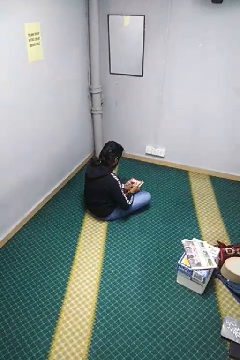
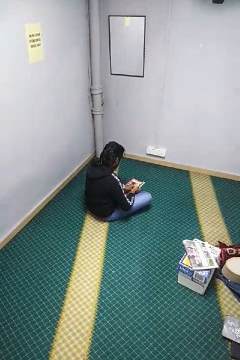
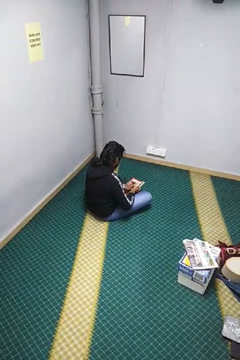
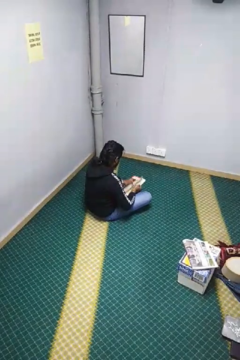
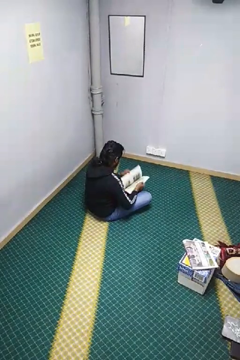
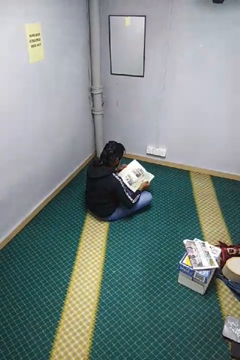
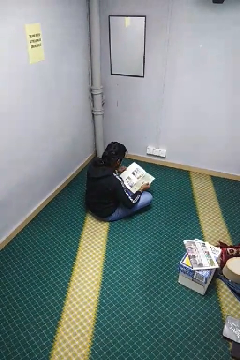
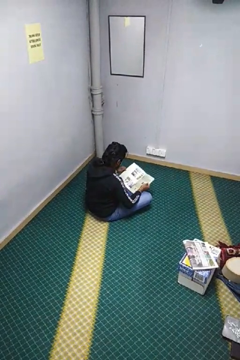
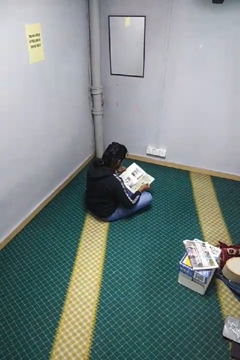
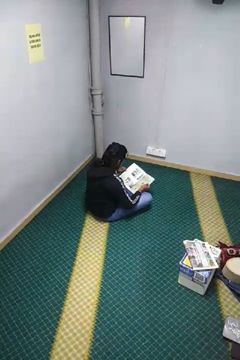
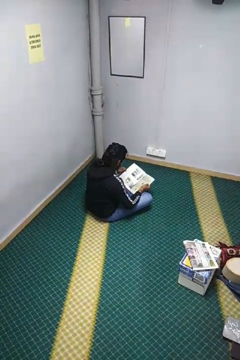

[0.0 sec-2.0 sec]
person reads magazine

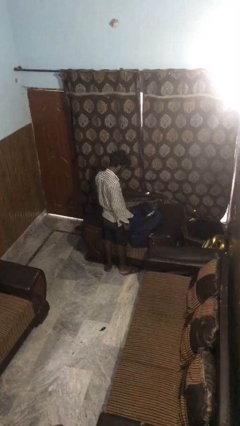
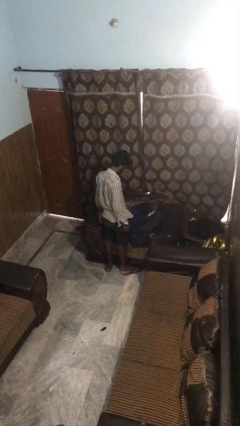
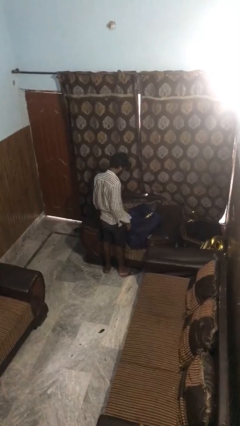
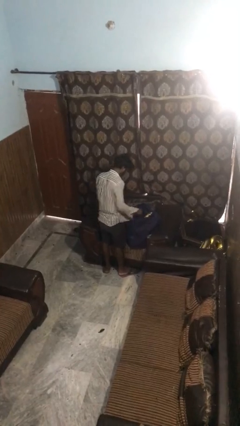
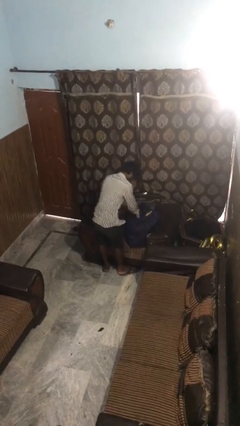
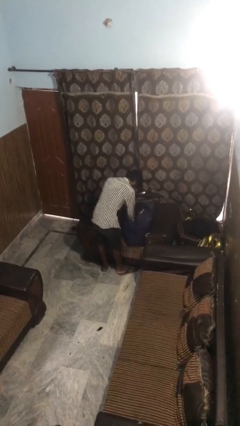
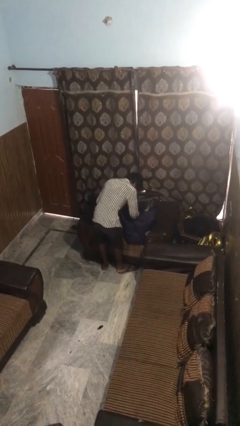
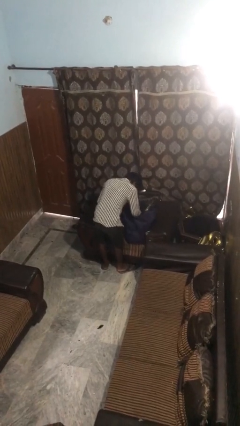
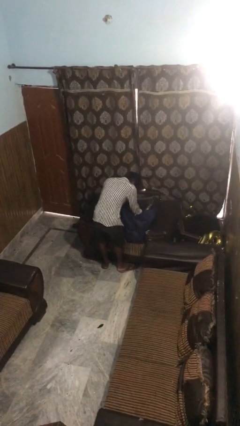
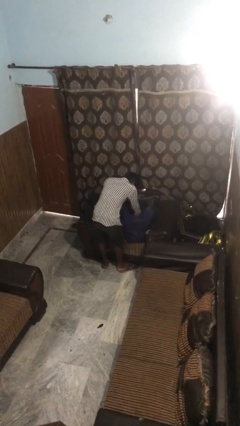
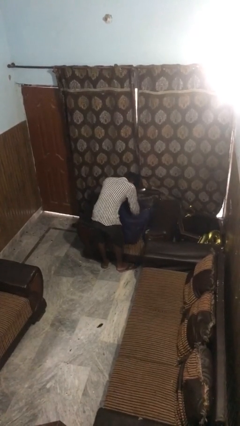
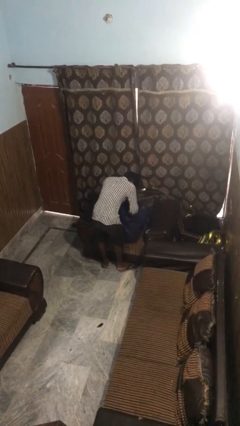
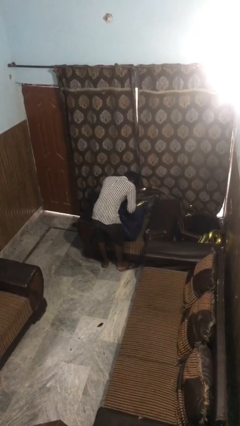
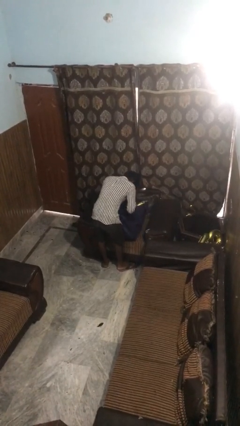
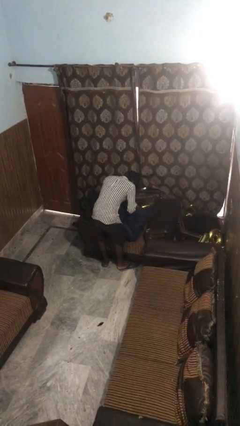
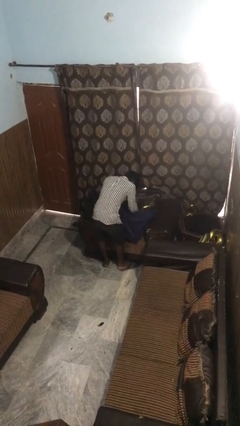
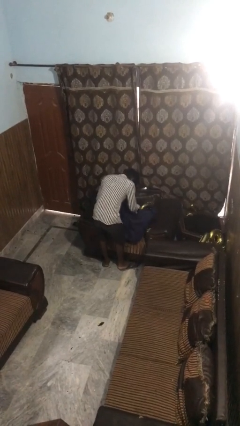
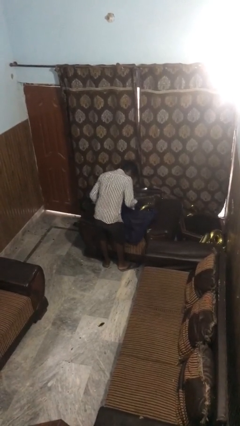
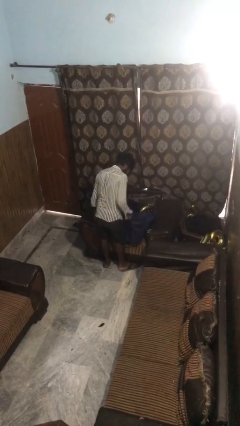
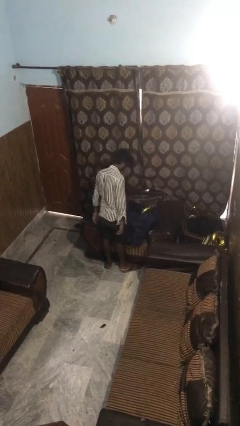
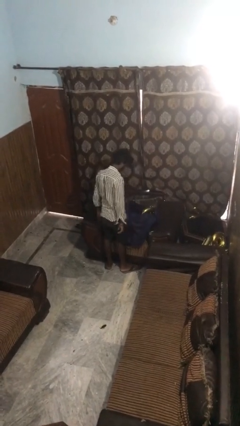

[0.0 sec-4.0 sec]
person searches in bag

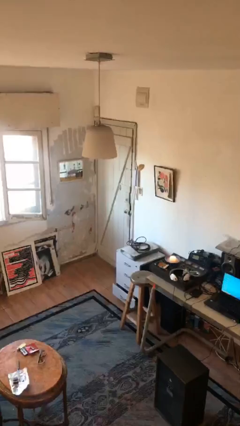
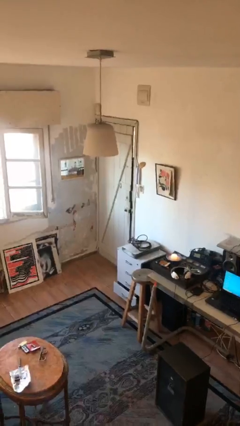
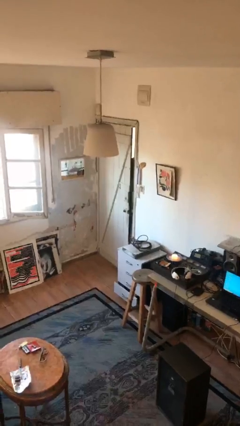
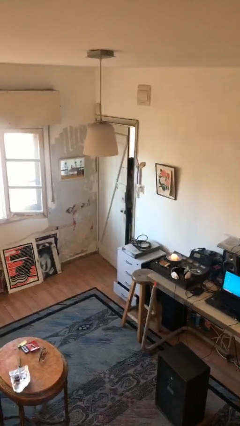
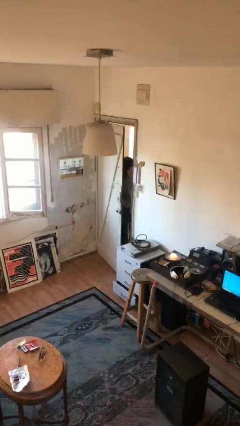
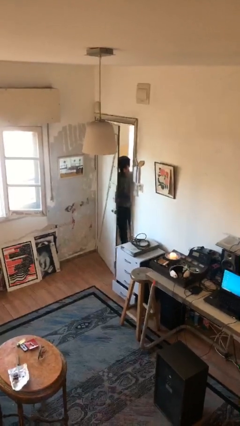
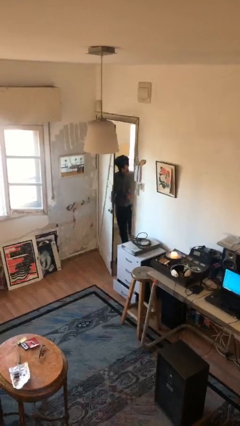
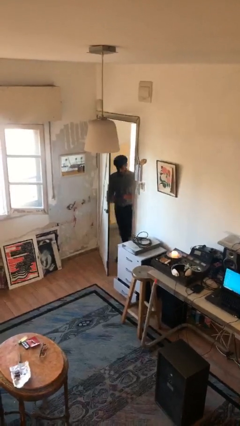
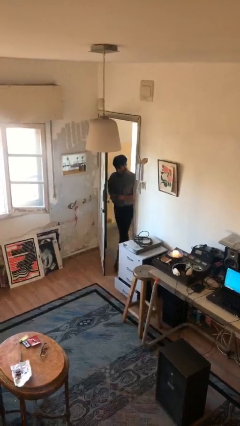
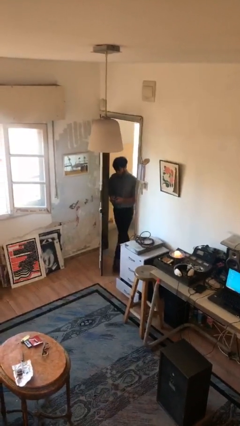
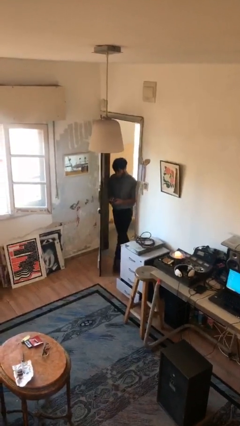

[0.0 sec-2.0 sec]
person opens facility door

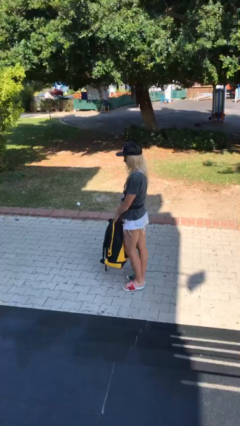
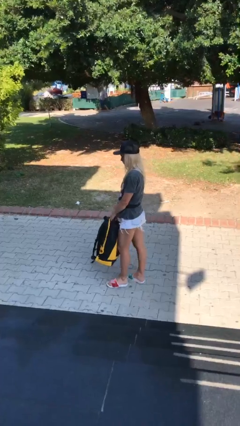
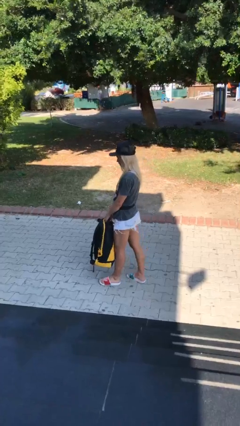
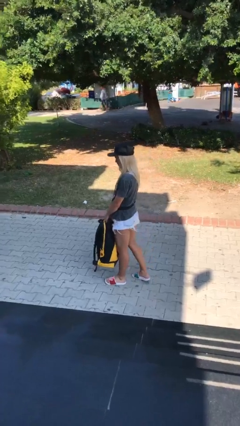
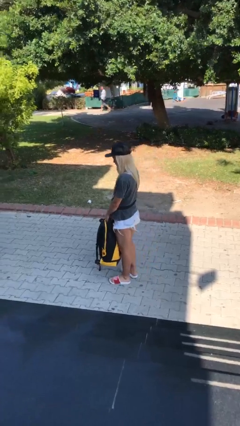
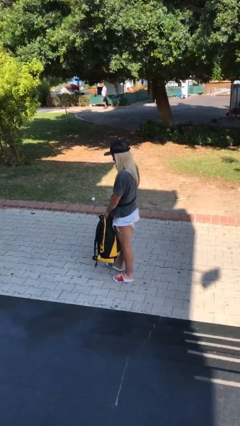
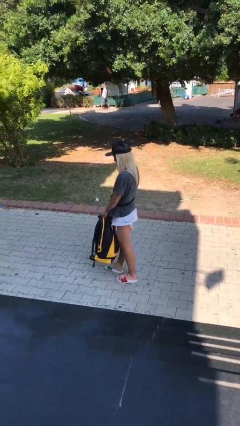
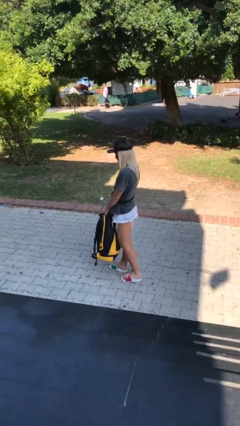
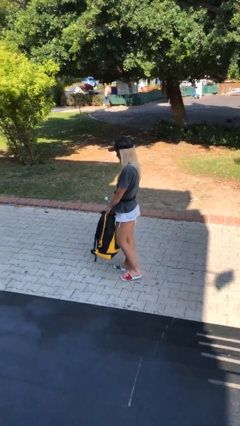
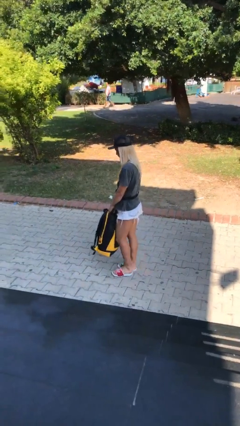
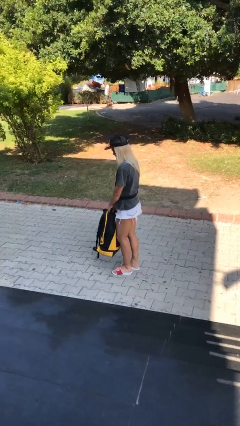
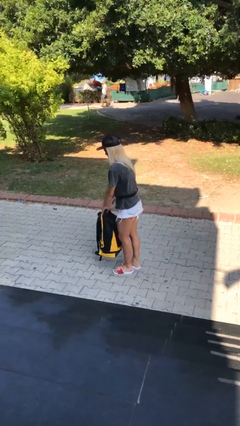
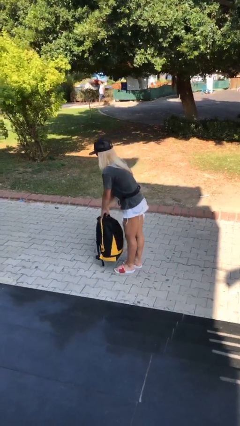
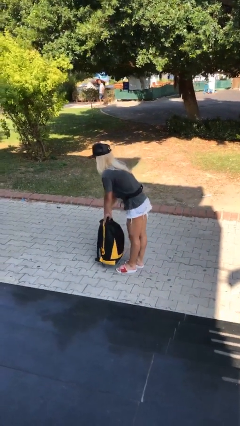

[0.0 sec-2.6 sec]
person carries heavy object

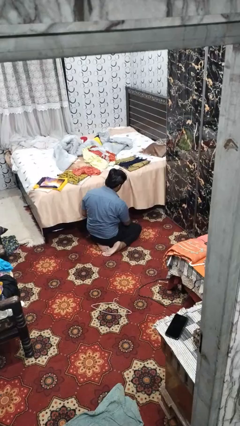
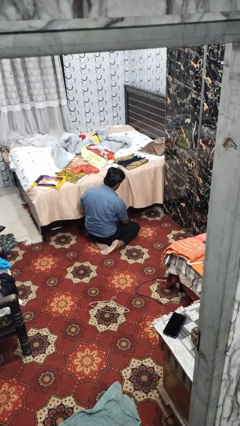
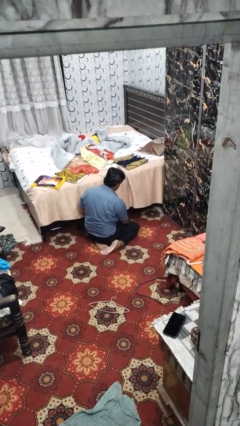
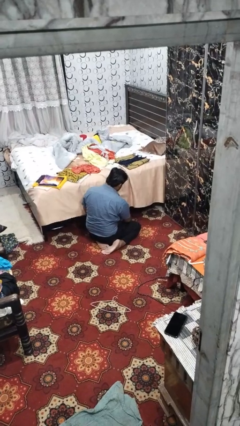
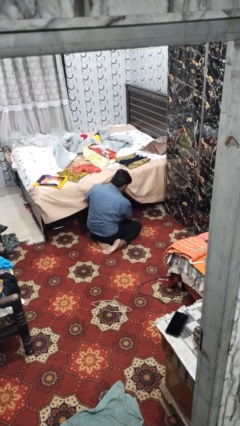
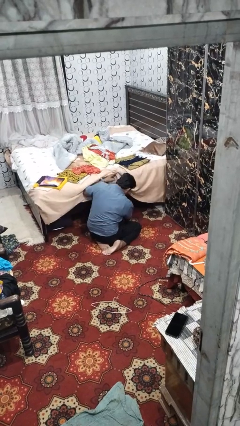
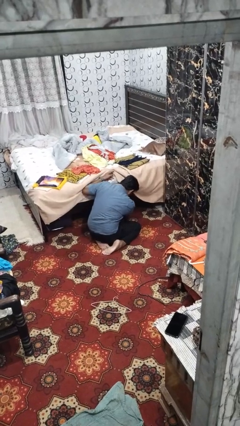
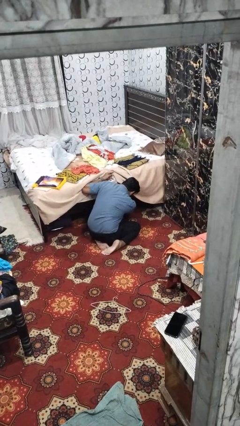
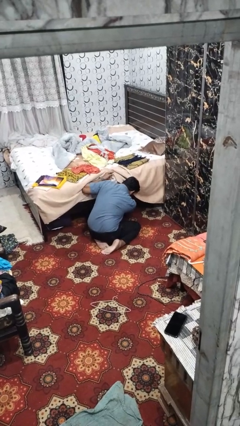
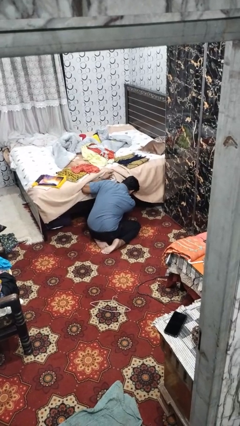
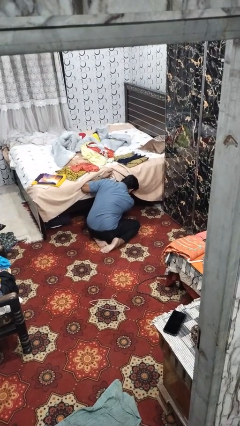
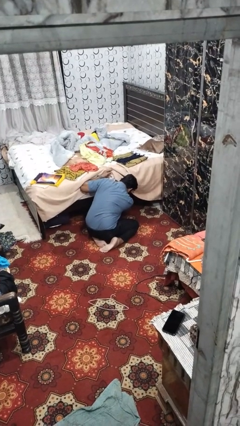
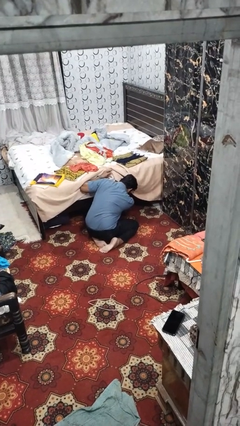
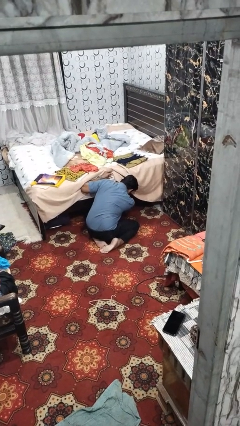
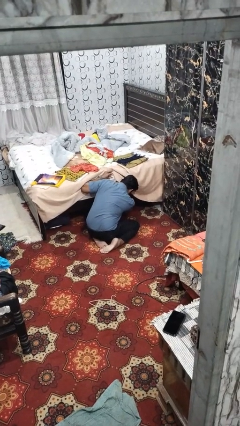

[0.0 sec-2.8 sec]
person searches under bed

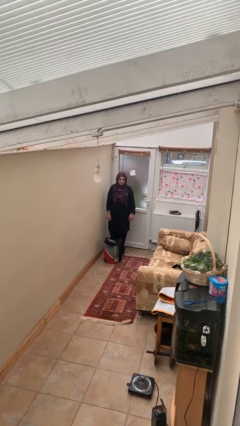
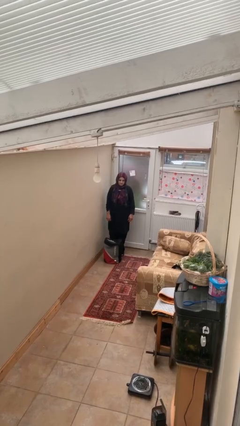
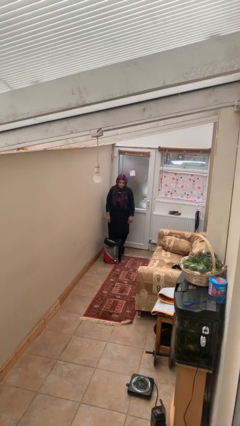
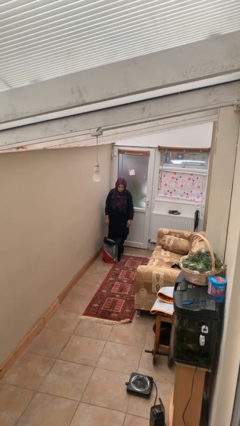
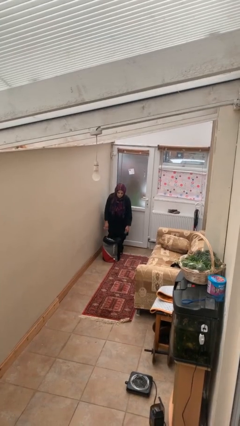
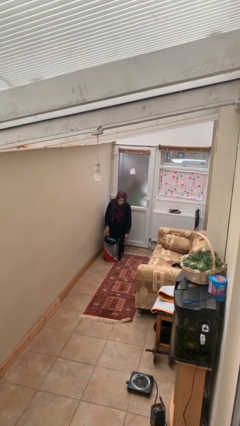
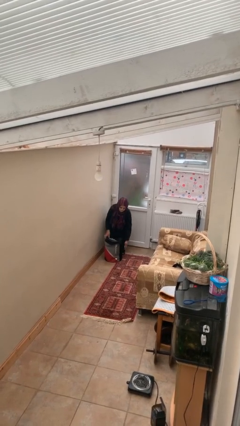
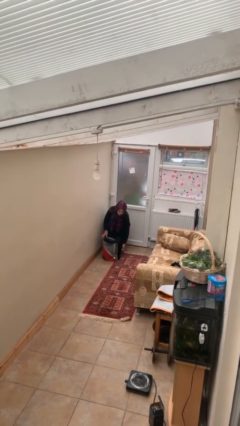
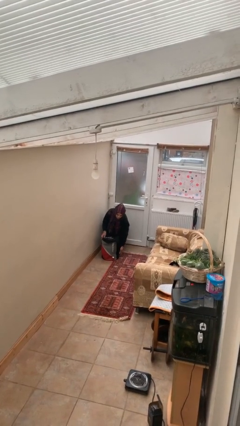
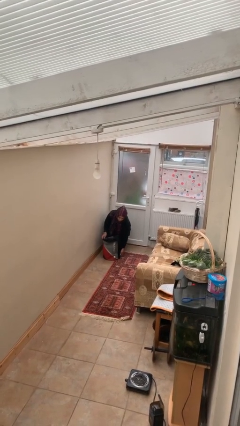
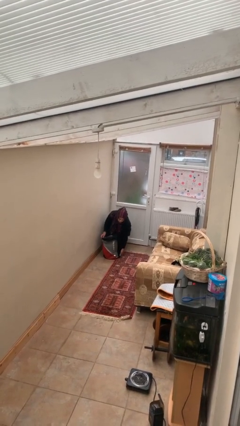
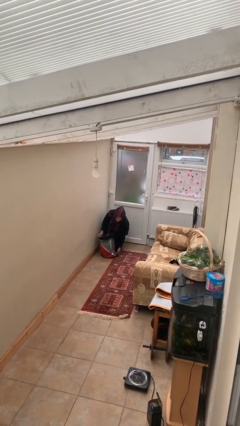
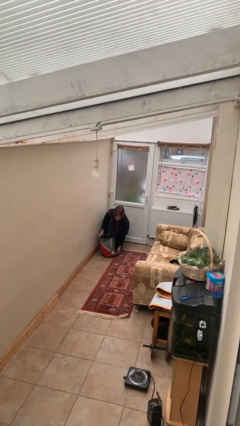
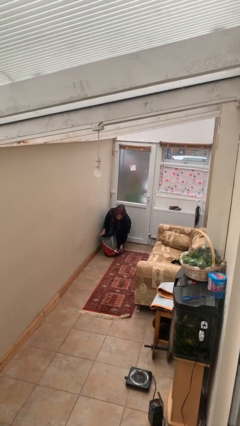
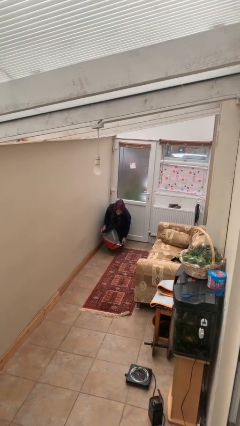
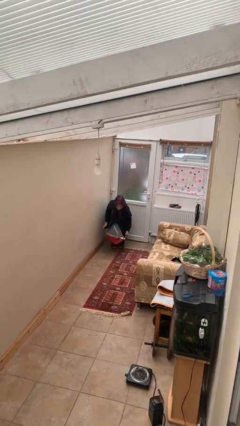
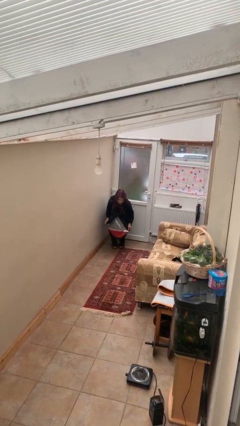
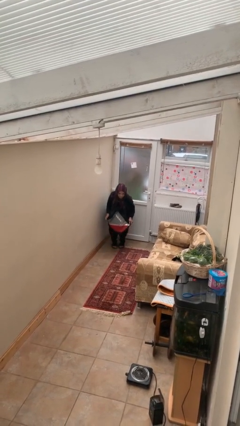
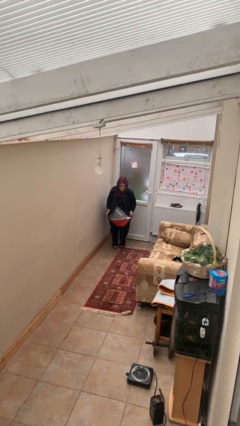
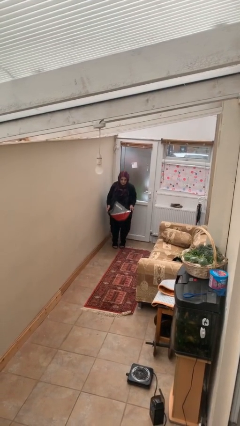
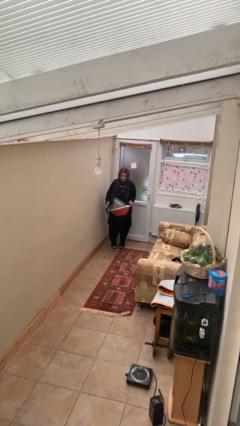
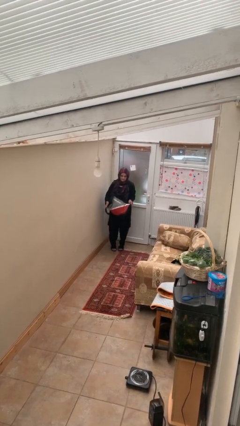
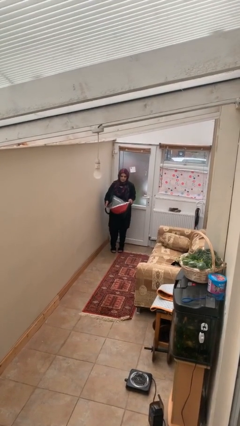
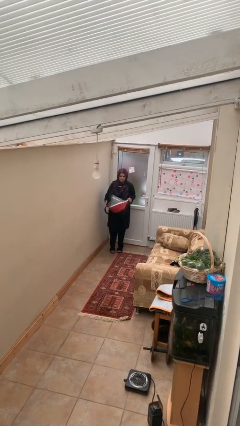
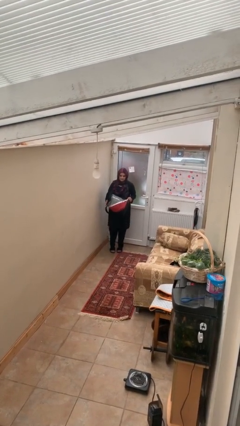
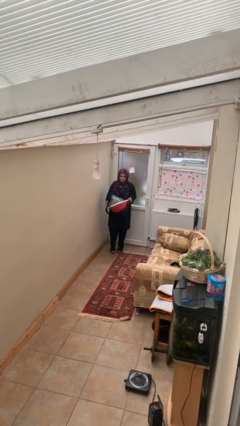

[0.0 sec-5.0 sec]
person picks up object from floor
